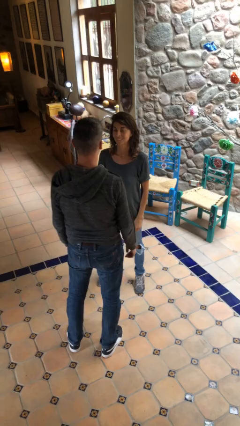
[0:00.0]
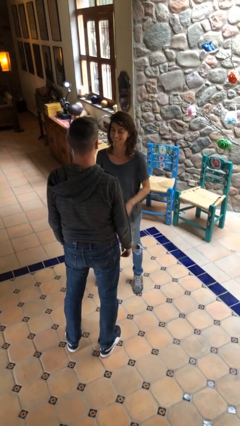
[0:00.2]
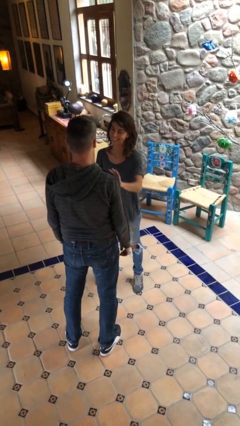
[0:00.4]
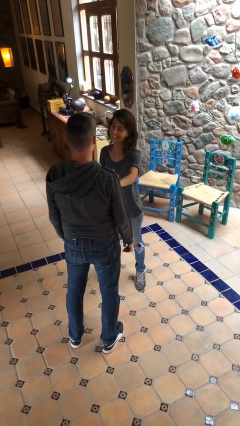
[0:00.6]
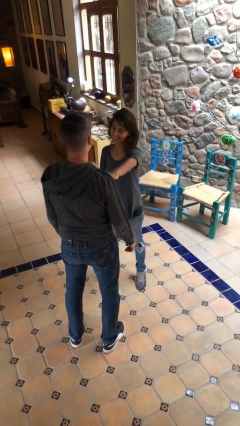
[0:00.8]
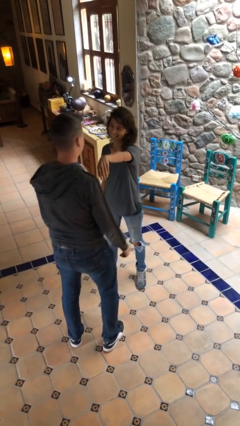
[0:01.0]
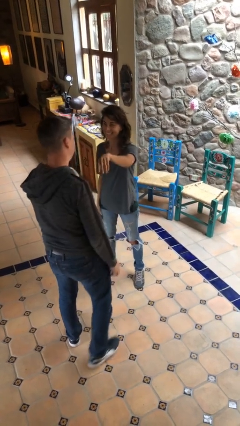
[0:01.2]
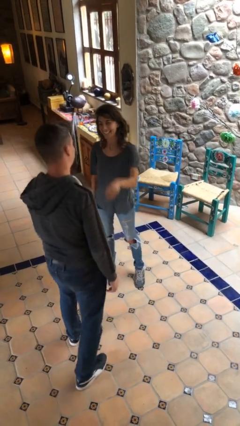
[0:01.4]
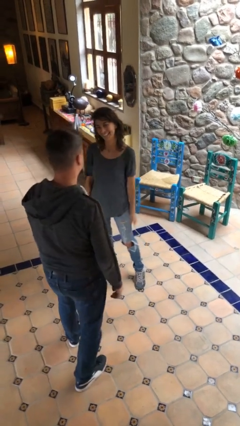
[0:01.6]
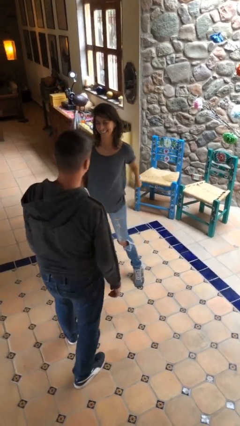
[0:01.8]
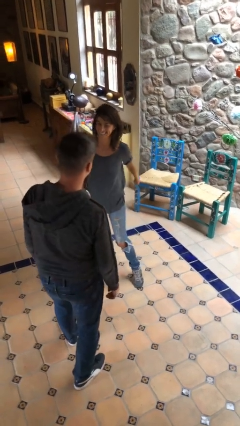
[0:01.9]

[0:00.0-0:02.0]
person shoves person

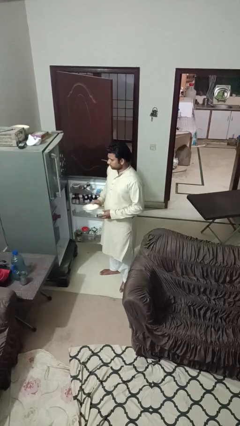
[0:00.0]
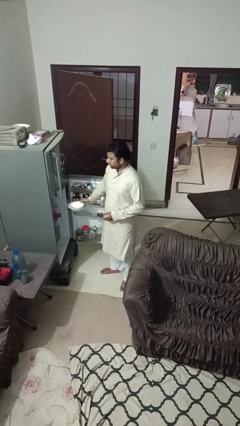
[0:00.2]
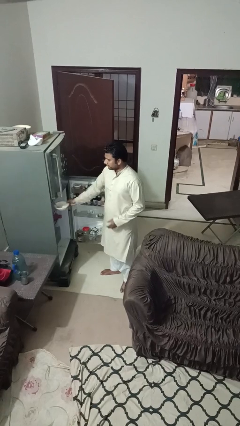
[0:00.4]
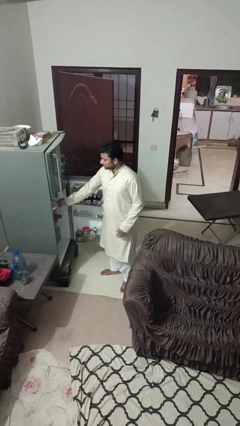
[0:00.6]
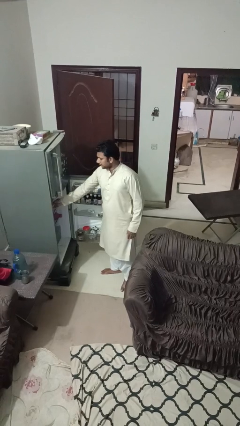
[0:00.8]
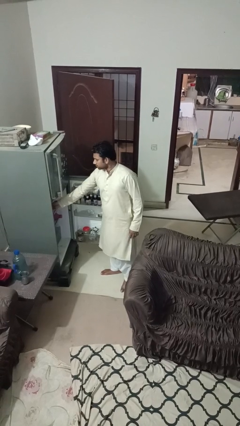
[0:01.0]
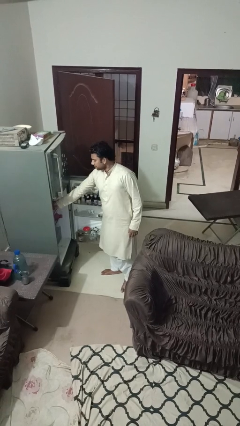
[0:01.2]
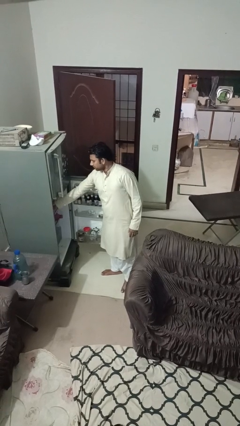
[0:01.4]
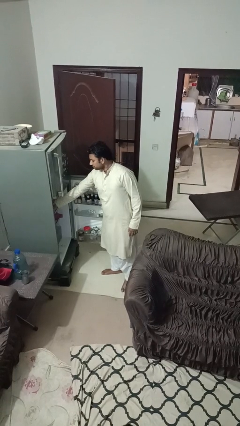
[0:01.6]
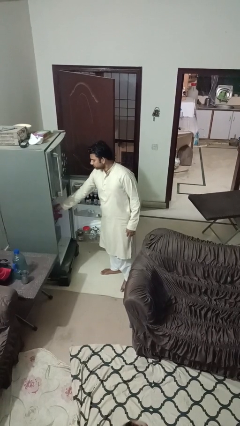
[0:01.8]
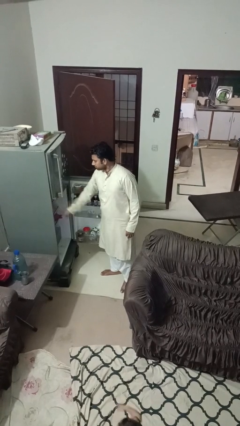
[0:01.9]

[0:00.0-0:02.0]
person puts object into refrigerator

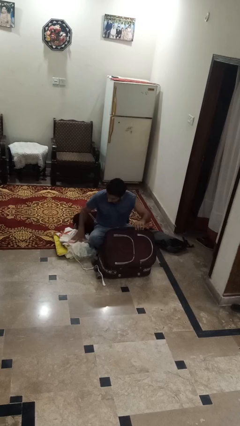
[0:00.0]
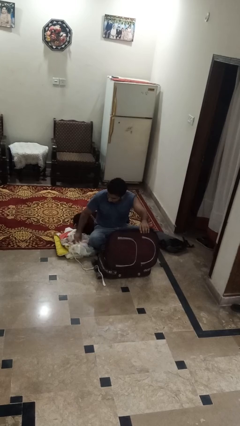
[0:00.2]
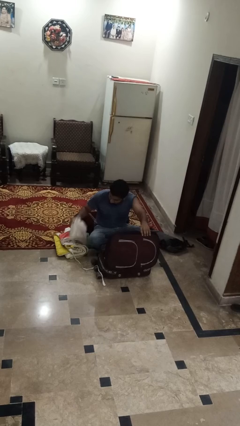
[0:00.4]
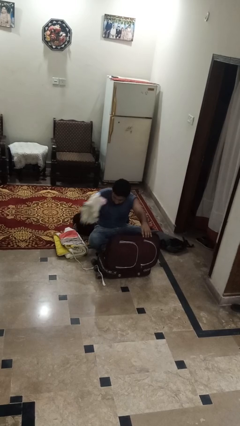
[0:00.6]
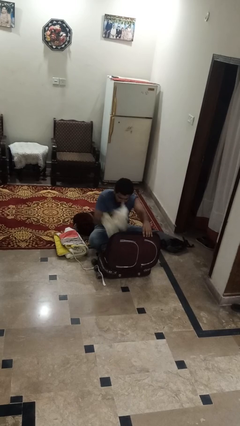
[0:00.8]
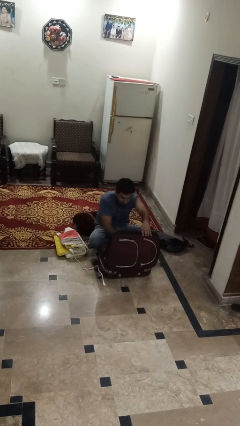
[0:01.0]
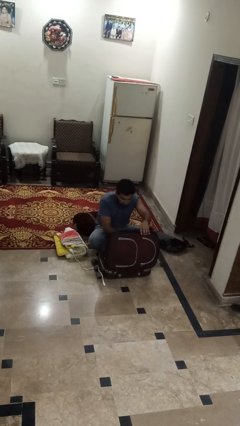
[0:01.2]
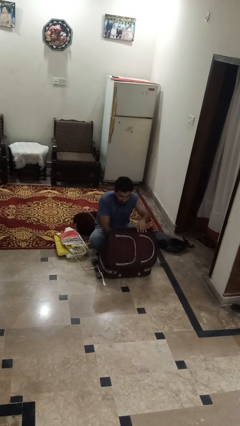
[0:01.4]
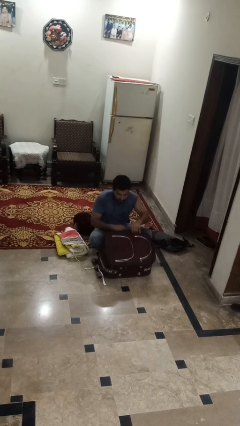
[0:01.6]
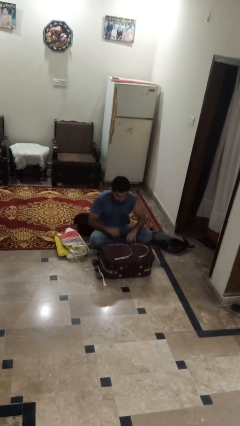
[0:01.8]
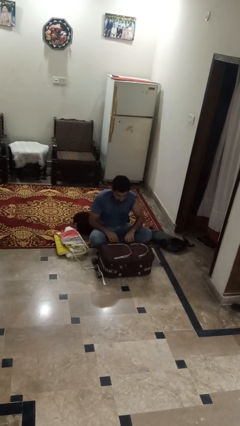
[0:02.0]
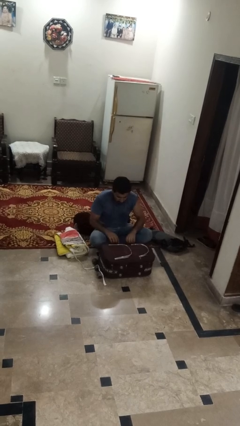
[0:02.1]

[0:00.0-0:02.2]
person loads clothes into suitcase

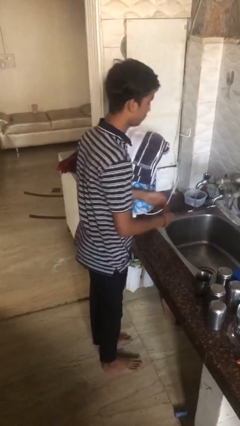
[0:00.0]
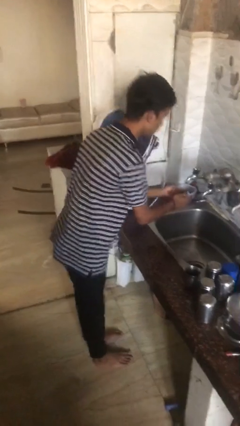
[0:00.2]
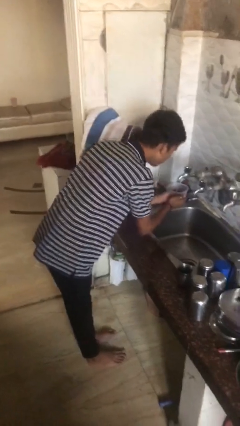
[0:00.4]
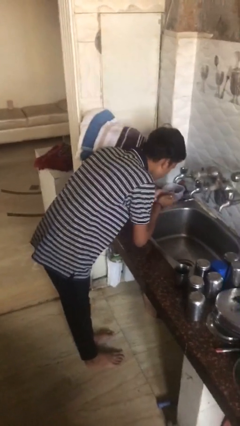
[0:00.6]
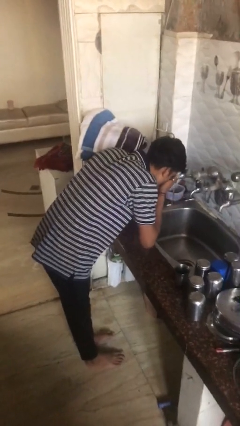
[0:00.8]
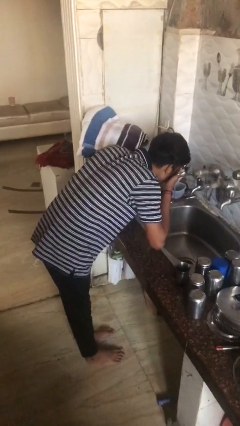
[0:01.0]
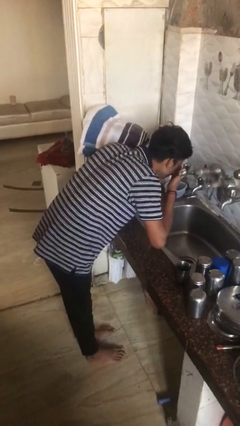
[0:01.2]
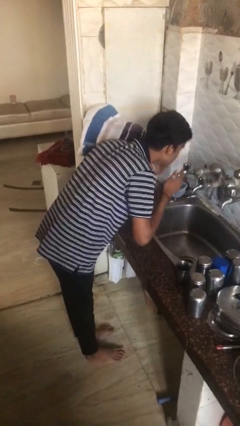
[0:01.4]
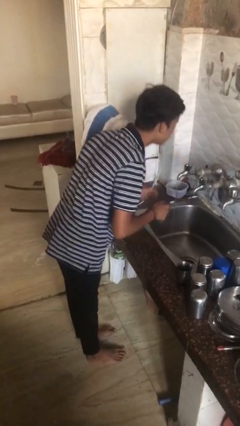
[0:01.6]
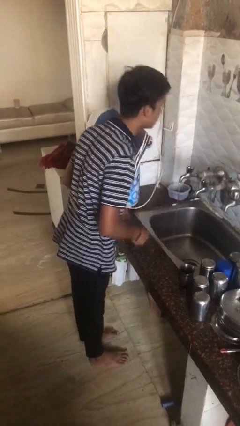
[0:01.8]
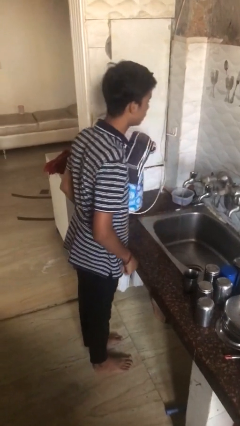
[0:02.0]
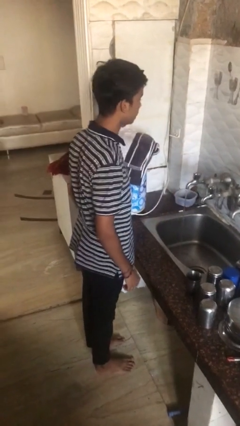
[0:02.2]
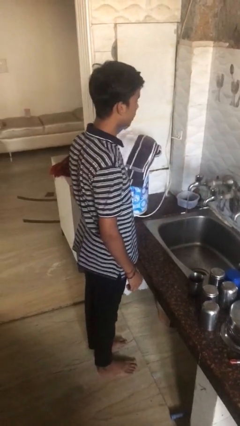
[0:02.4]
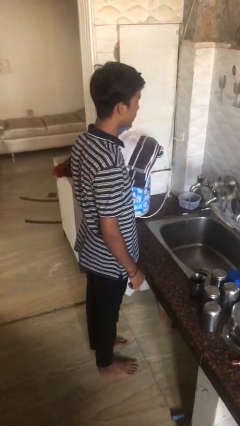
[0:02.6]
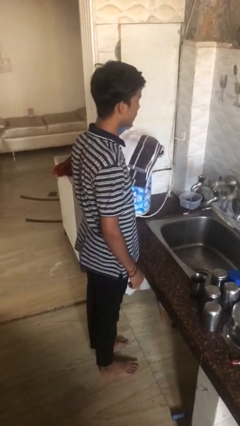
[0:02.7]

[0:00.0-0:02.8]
person washes face

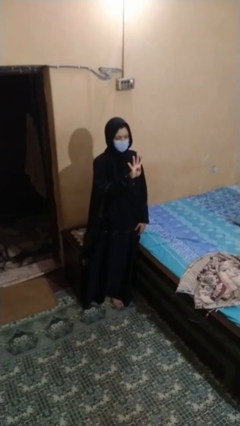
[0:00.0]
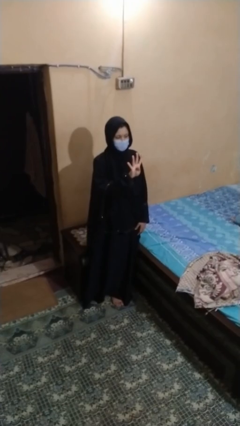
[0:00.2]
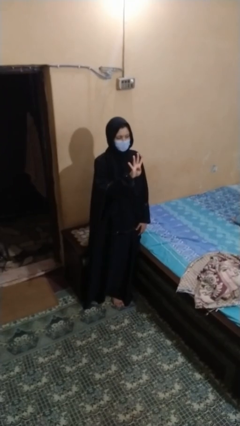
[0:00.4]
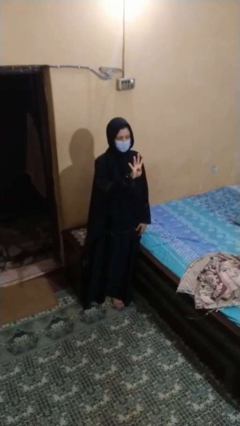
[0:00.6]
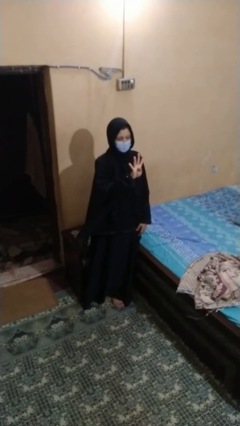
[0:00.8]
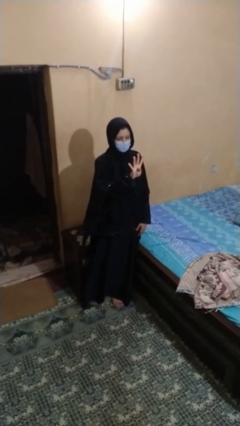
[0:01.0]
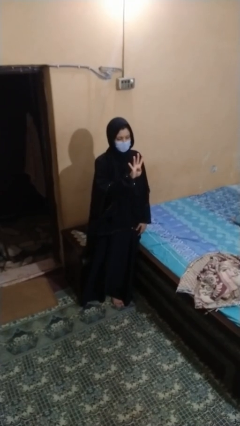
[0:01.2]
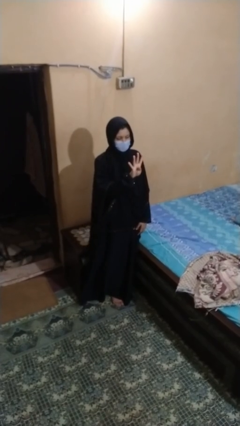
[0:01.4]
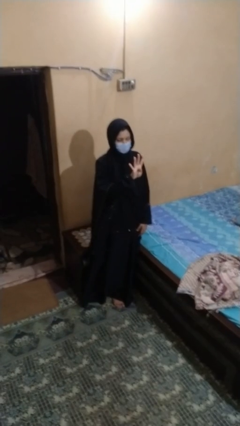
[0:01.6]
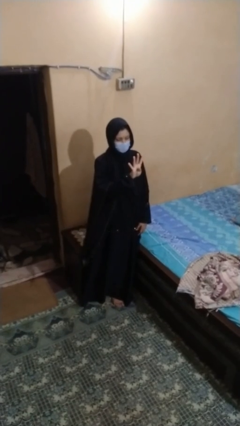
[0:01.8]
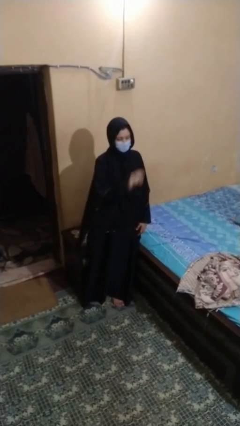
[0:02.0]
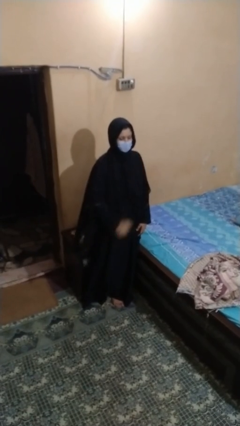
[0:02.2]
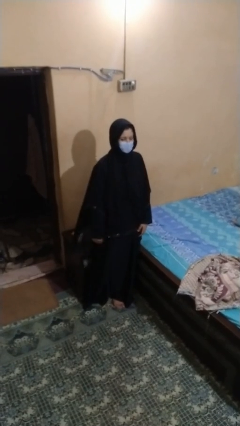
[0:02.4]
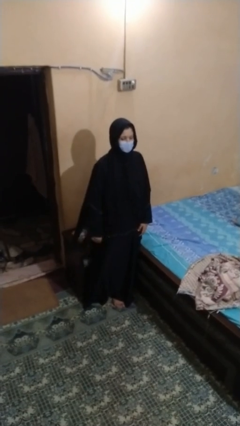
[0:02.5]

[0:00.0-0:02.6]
person gestures number four

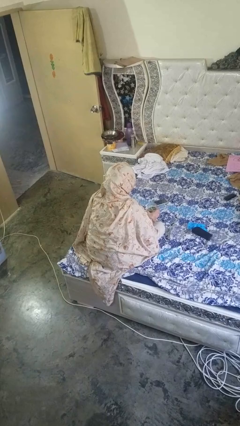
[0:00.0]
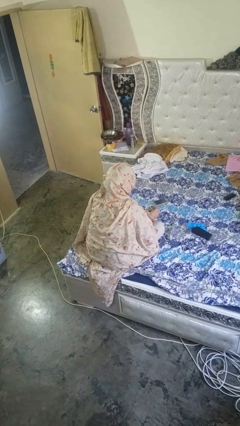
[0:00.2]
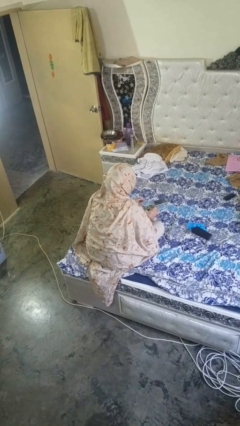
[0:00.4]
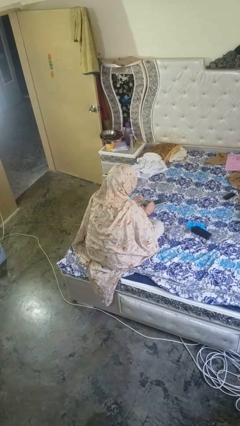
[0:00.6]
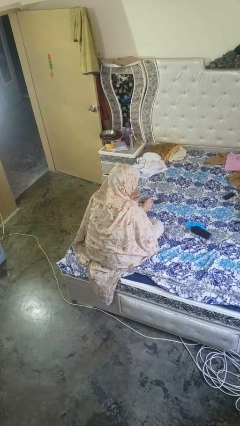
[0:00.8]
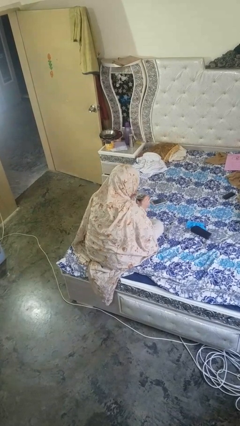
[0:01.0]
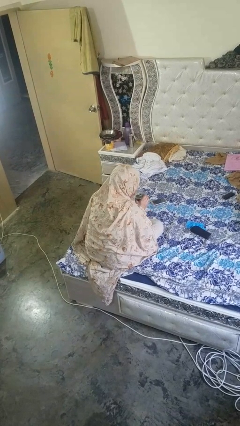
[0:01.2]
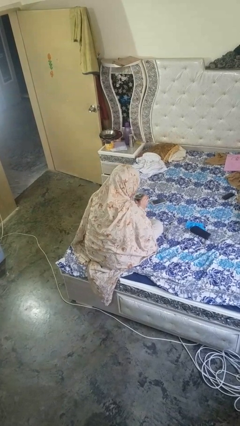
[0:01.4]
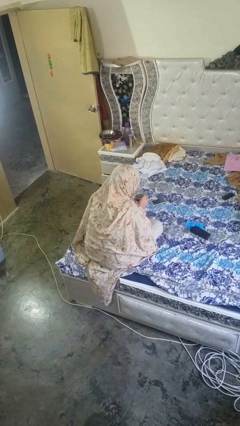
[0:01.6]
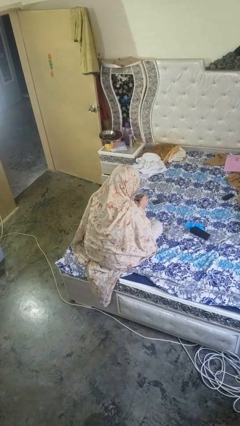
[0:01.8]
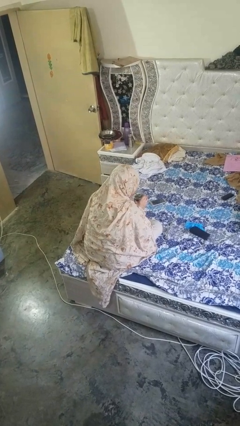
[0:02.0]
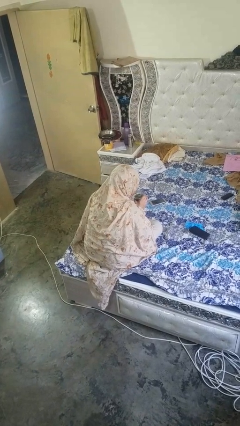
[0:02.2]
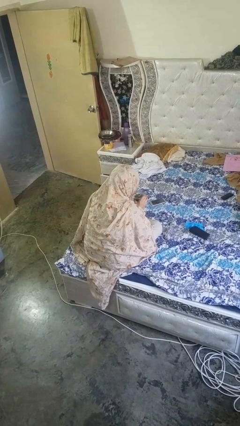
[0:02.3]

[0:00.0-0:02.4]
person drinks from straw

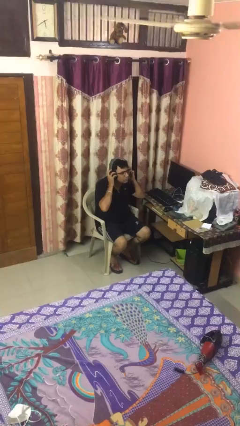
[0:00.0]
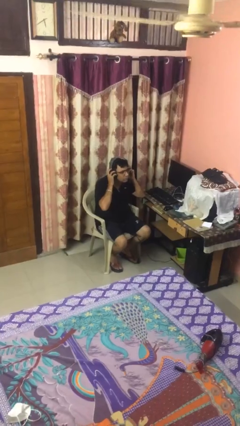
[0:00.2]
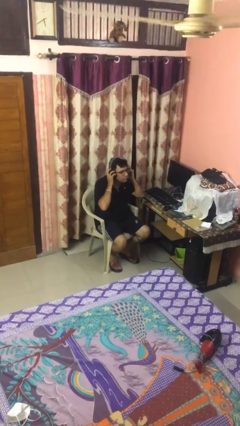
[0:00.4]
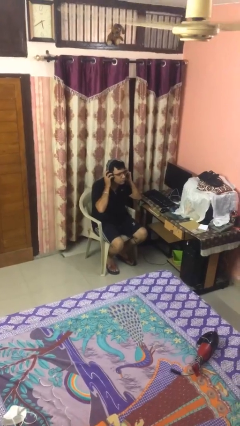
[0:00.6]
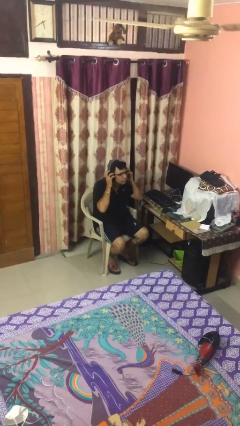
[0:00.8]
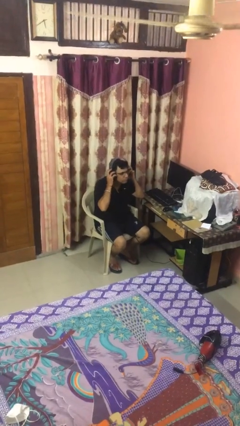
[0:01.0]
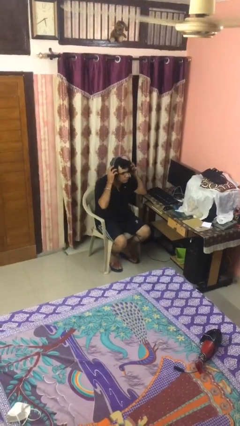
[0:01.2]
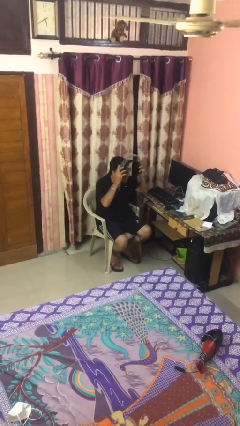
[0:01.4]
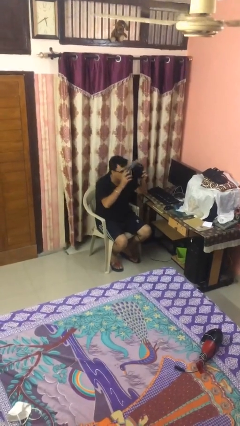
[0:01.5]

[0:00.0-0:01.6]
person takes off headphones

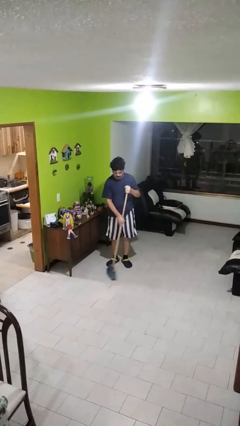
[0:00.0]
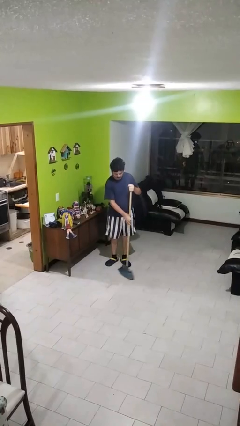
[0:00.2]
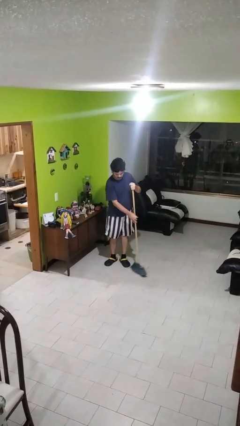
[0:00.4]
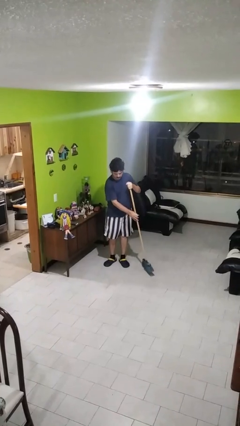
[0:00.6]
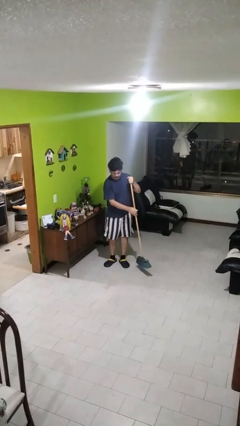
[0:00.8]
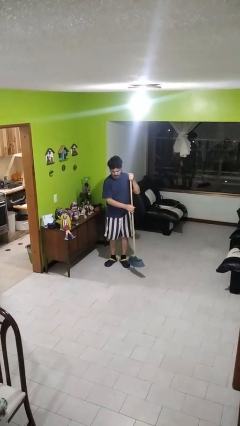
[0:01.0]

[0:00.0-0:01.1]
person sweeps floor
